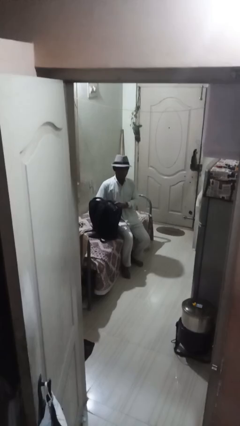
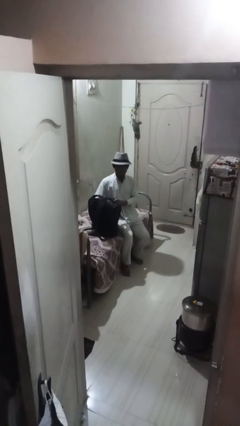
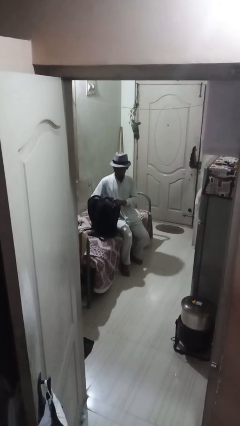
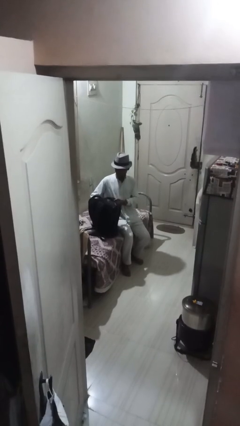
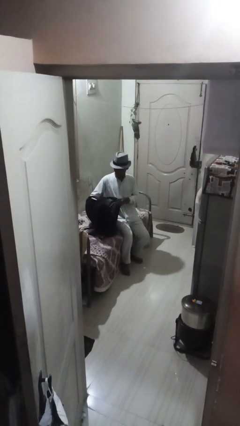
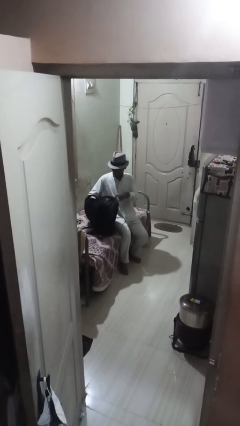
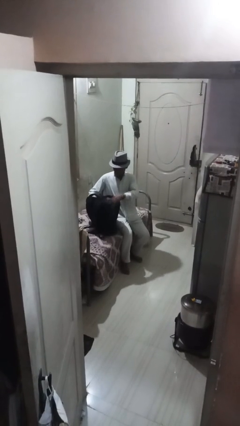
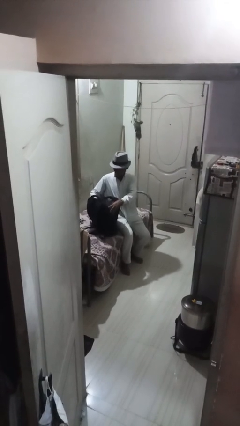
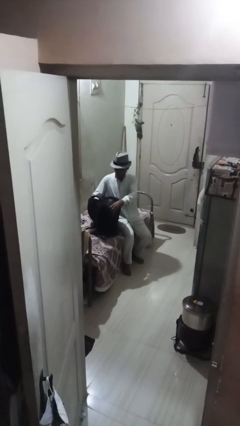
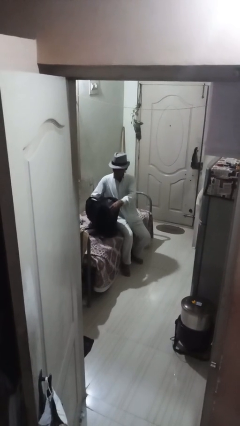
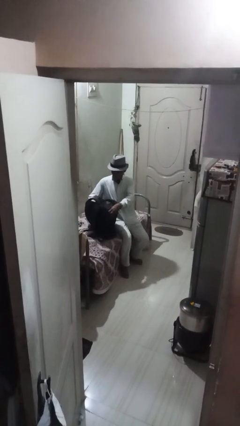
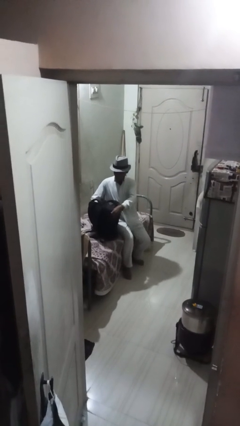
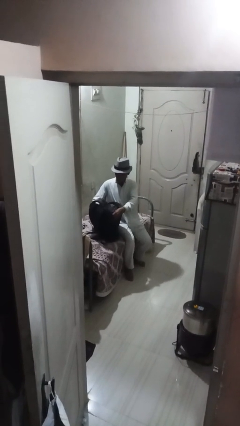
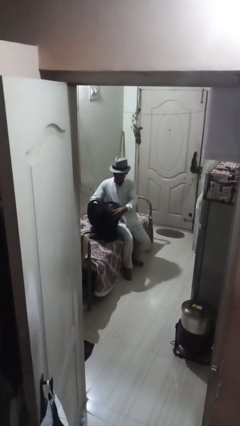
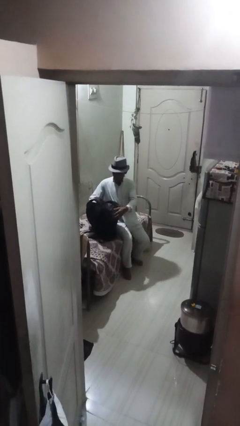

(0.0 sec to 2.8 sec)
person searches in backpack

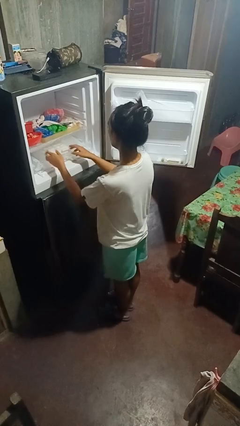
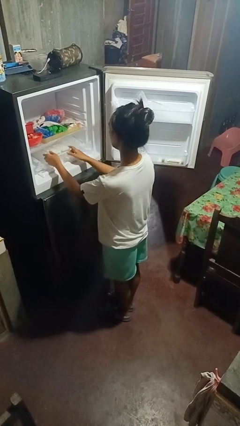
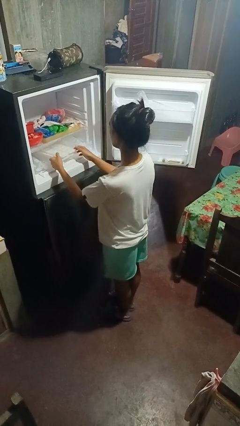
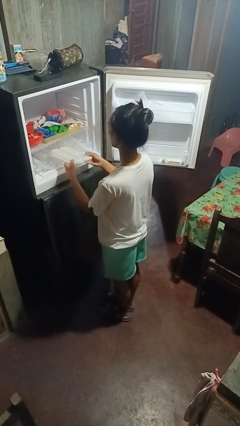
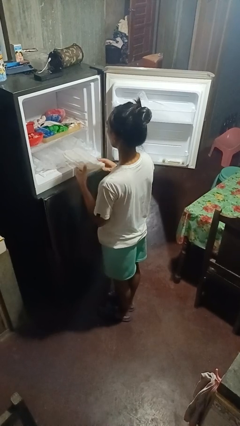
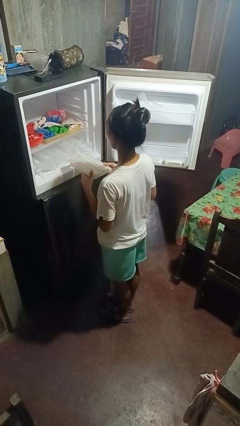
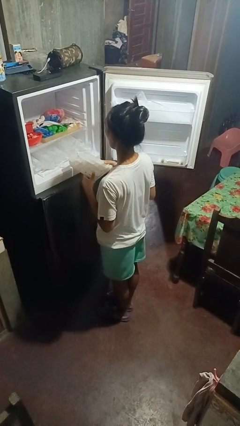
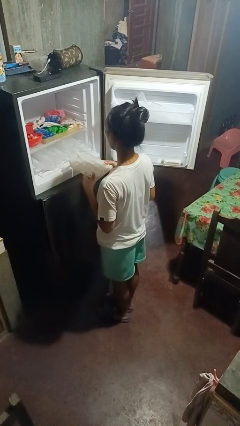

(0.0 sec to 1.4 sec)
person takes object from refrigerator

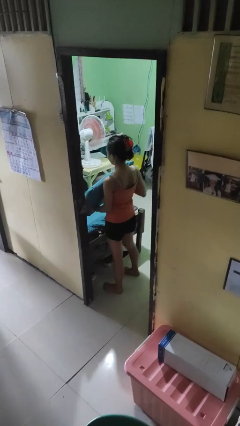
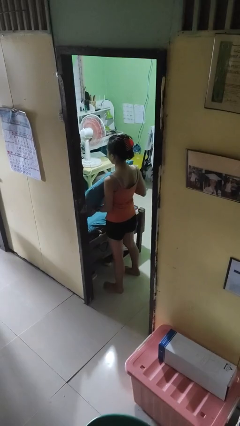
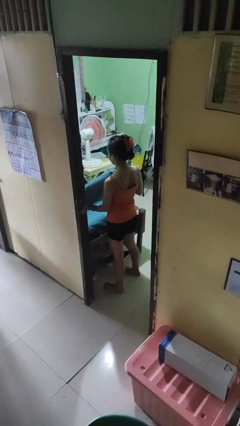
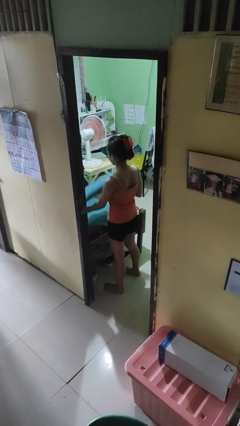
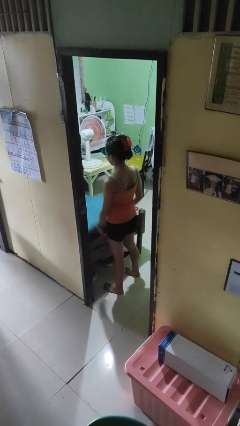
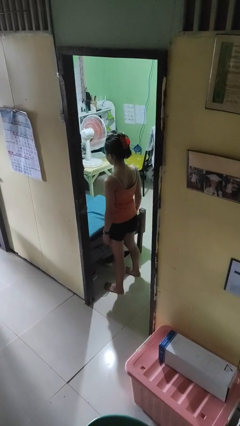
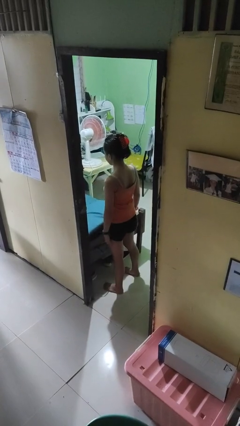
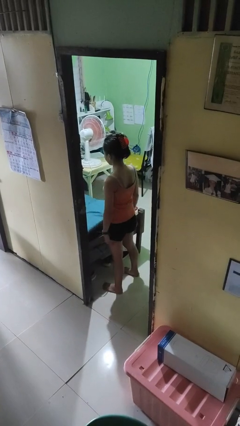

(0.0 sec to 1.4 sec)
person puts down object on bed

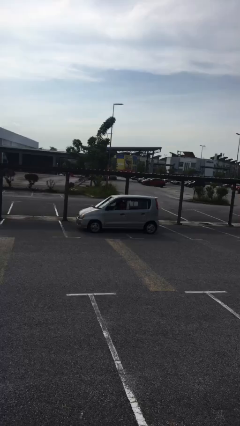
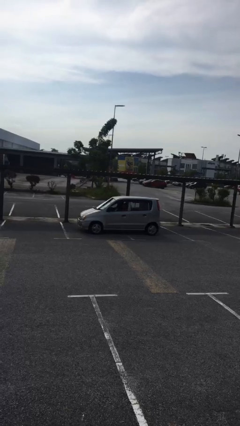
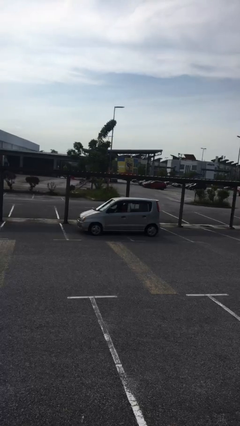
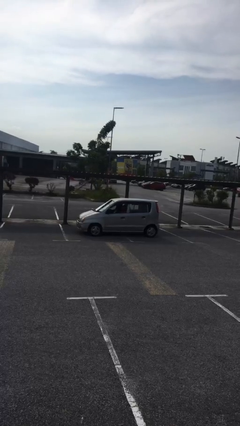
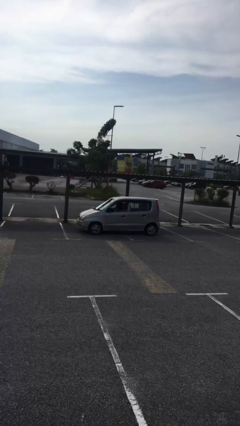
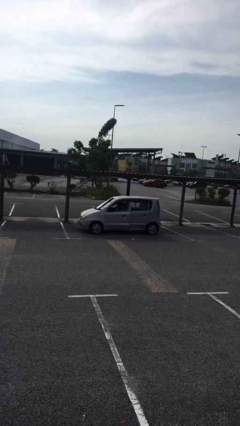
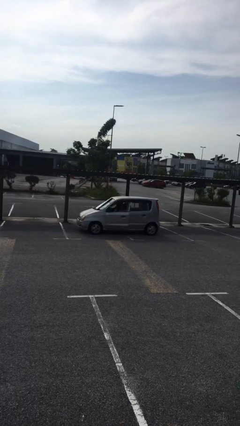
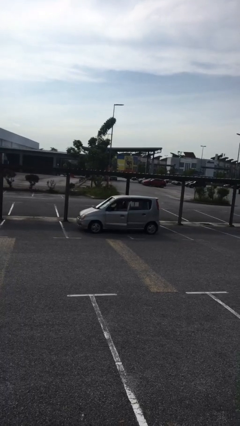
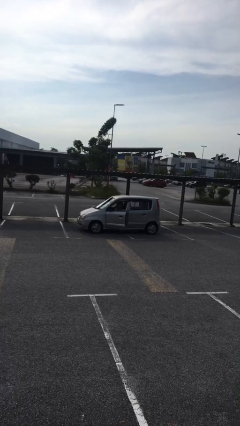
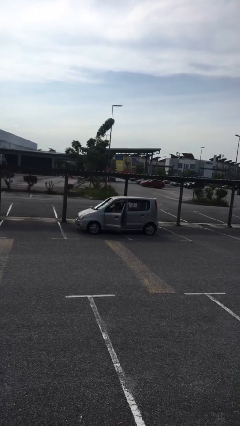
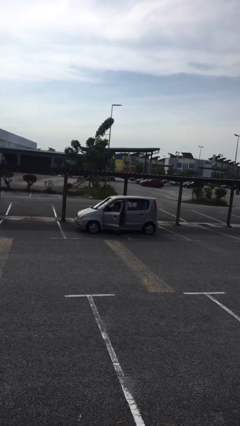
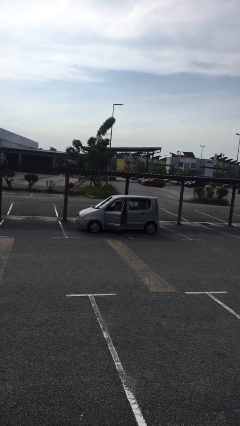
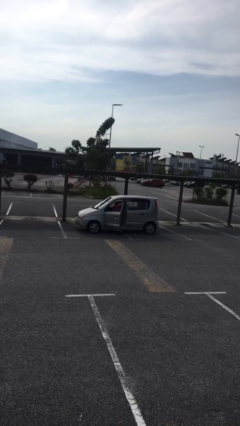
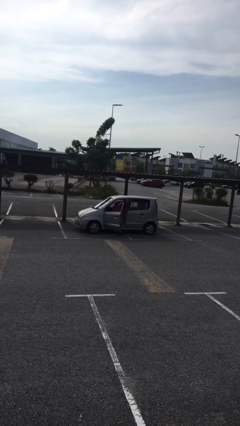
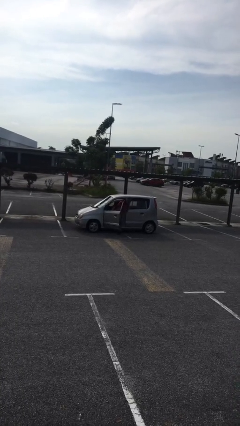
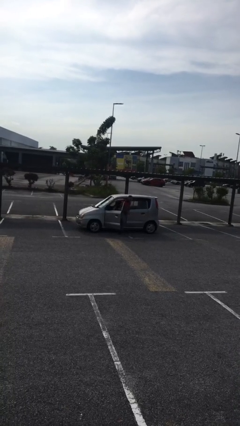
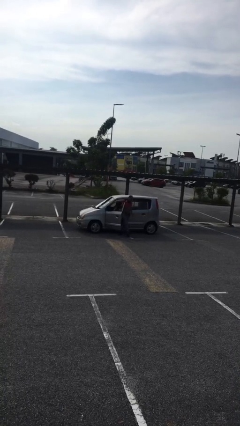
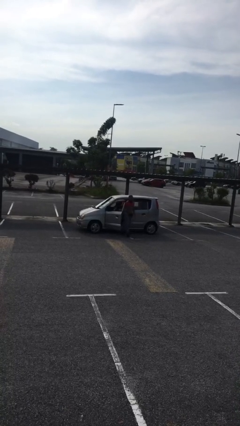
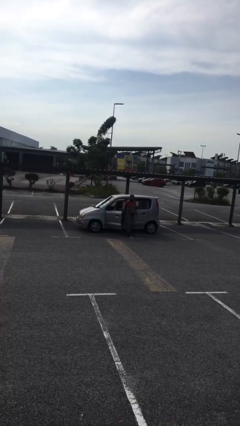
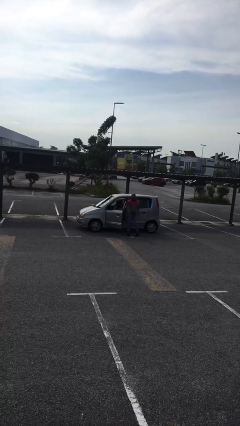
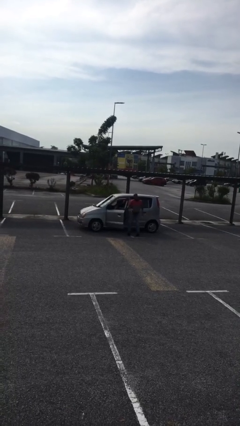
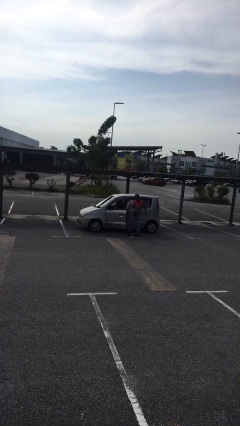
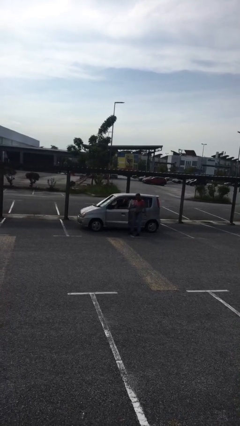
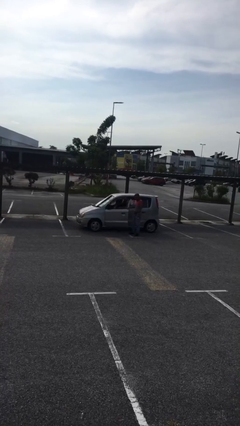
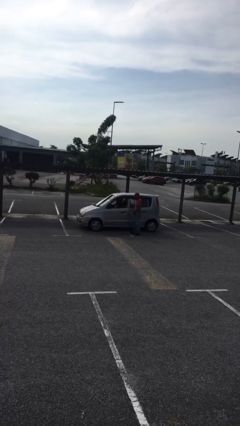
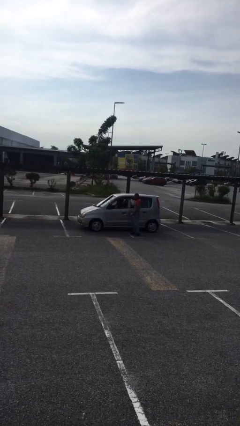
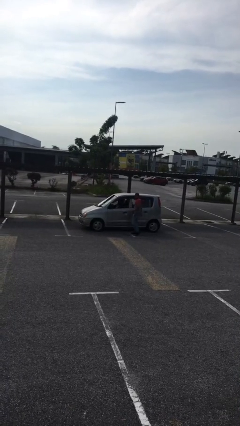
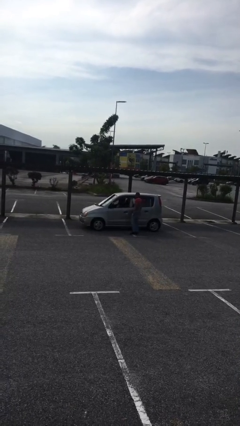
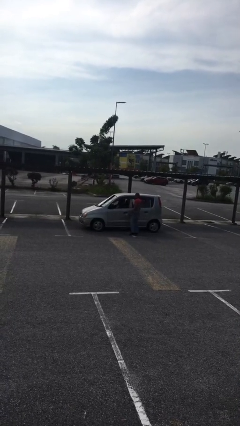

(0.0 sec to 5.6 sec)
car drops off person

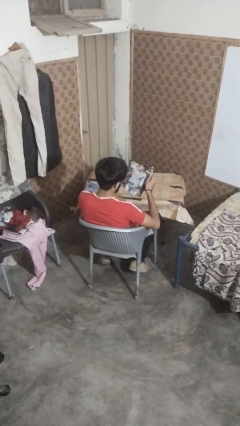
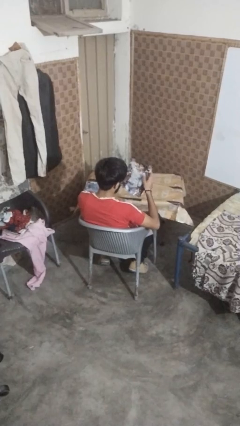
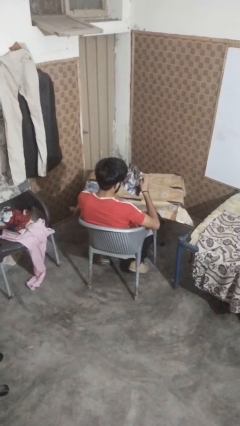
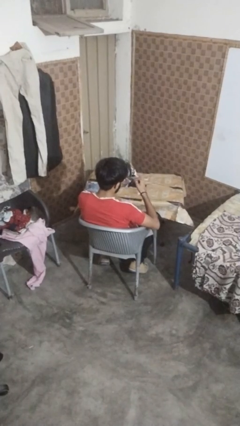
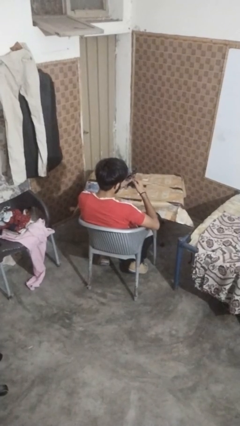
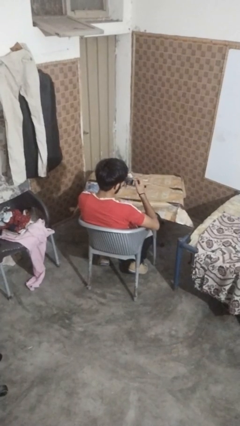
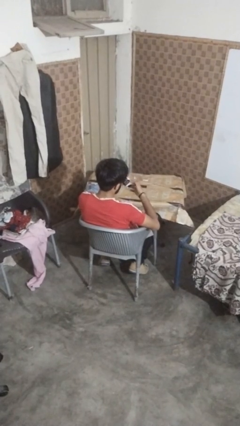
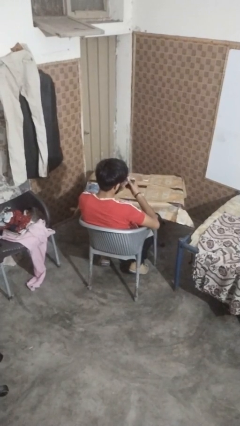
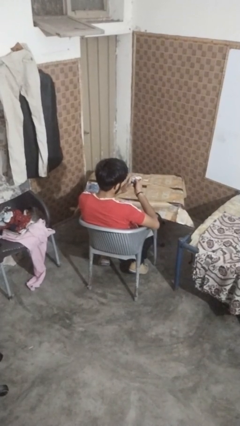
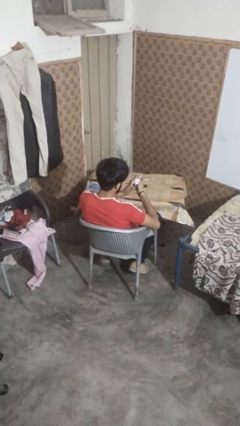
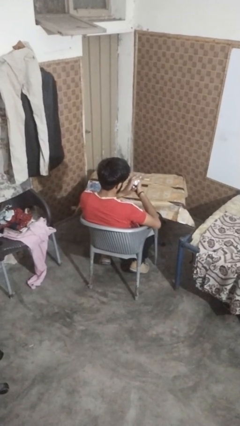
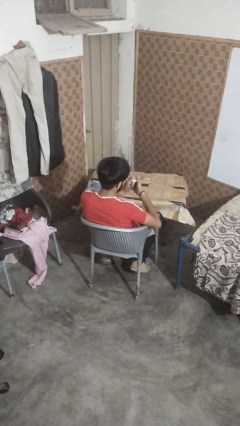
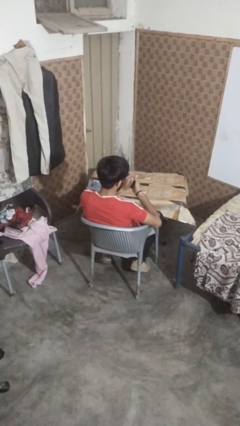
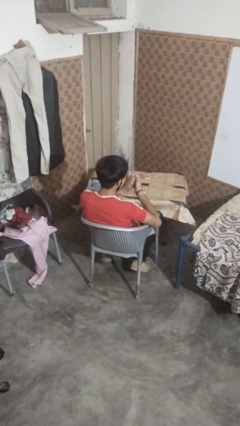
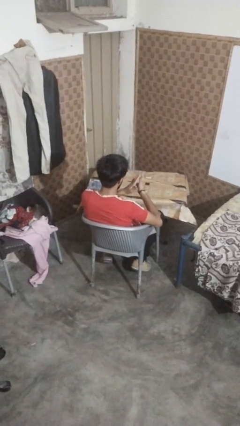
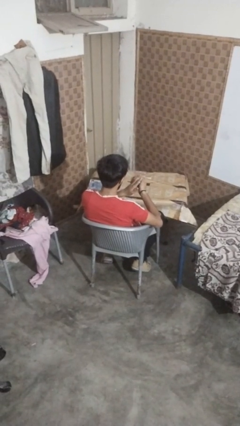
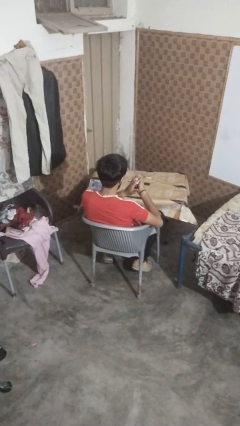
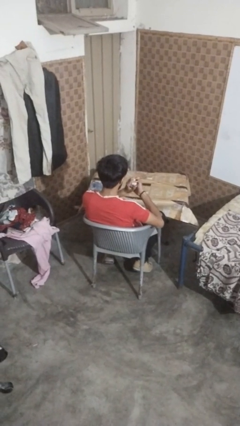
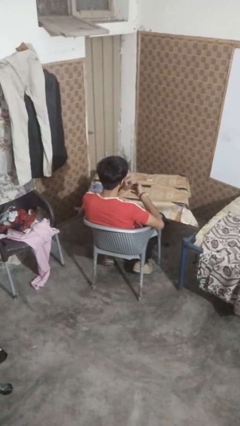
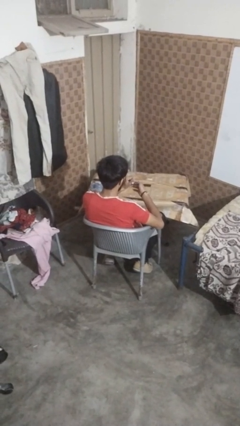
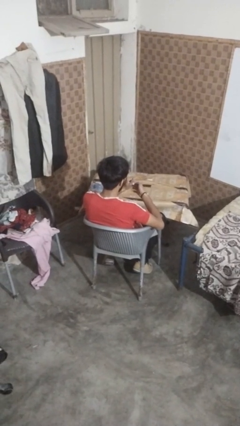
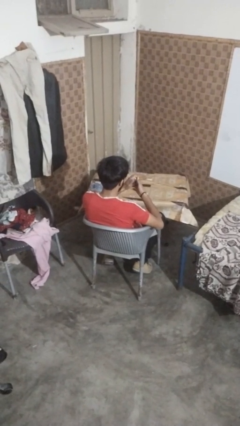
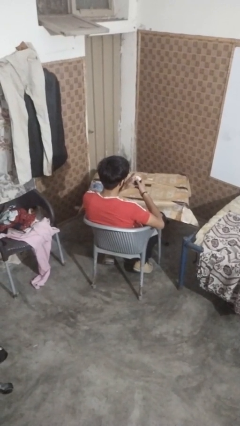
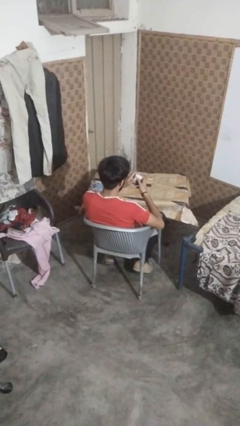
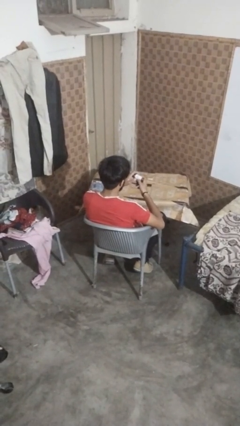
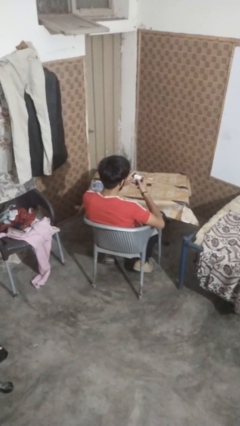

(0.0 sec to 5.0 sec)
person crumples paper

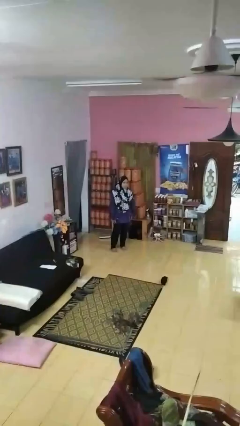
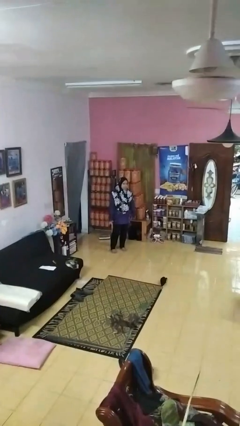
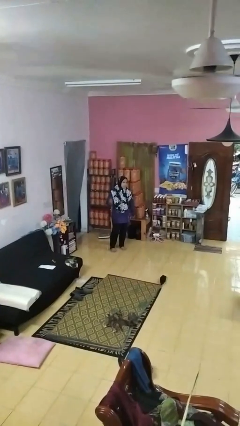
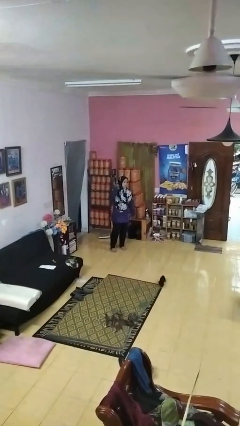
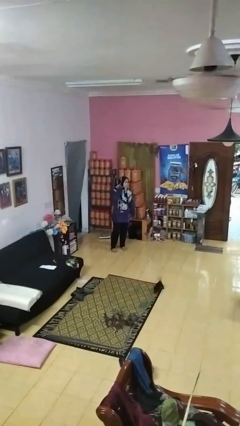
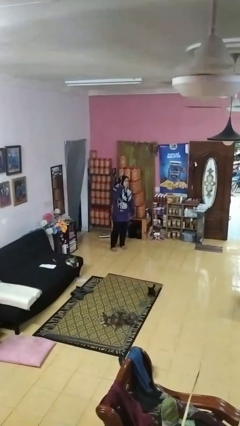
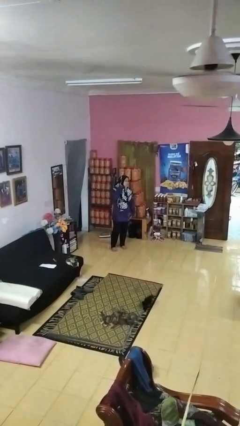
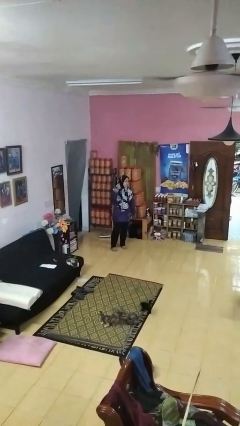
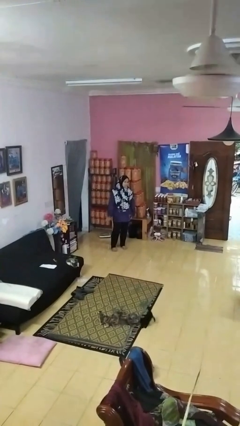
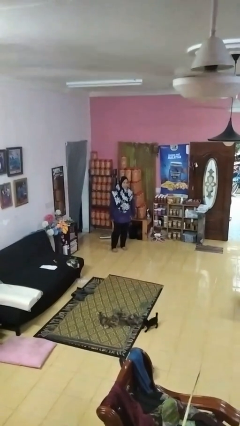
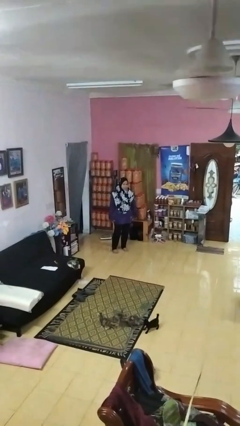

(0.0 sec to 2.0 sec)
person gestures listen closely
